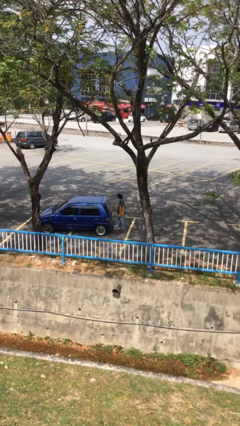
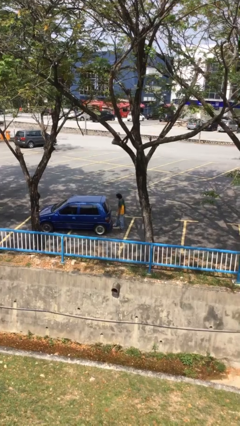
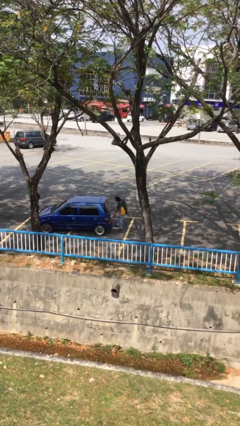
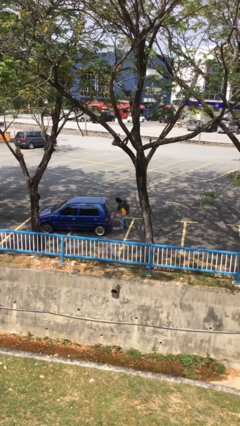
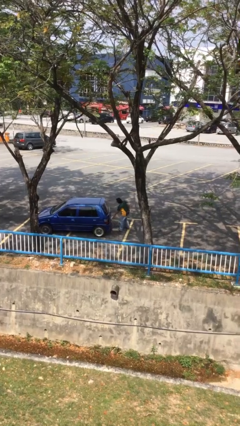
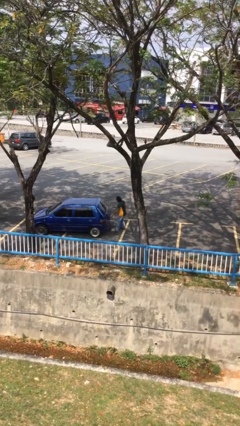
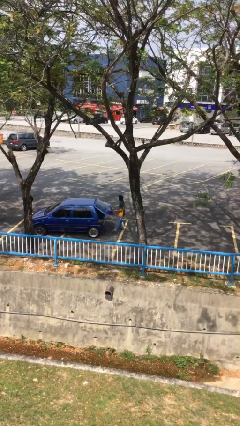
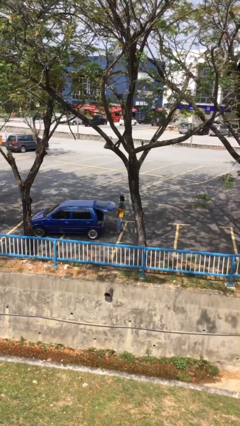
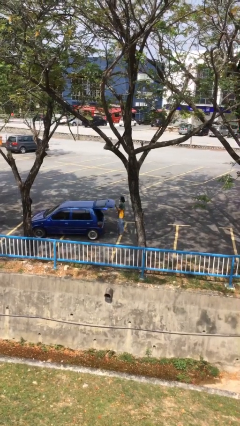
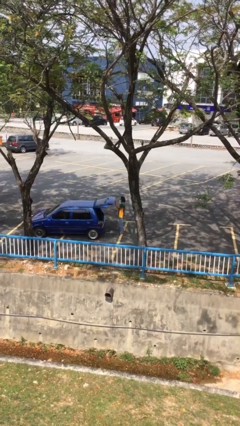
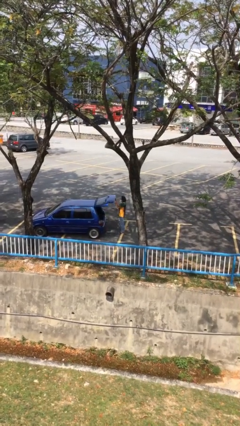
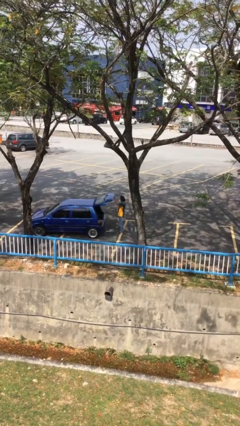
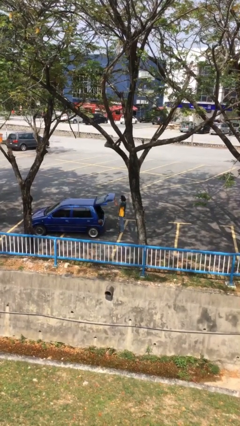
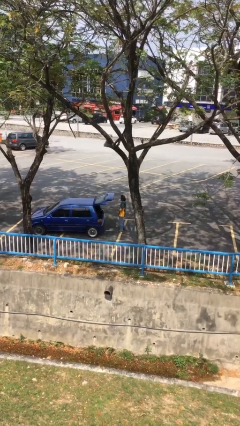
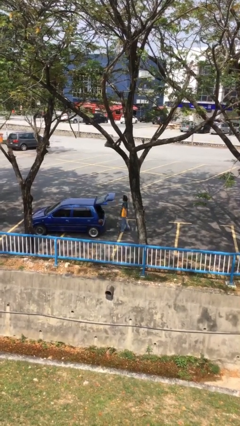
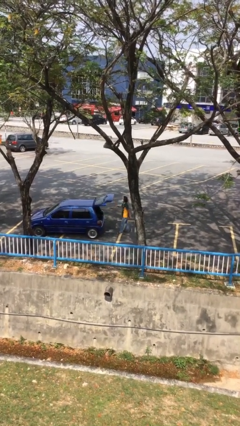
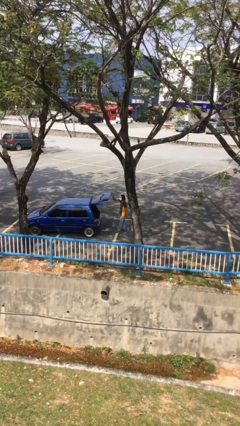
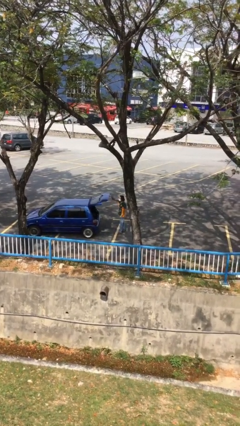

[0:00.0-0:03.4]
person opens car trunk

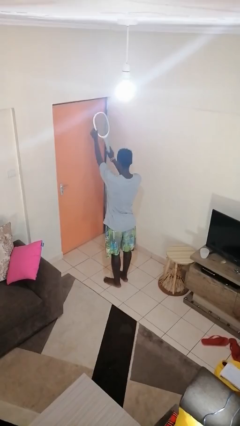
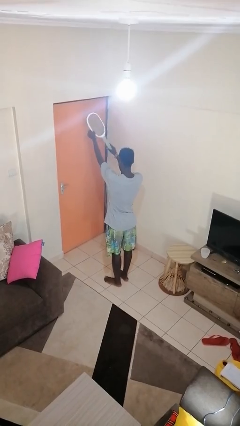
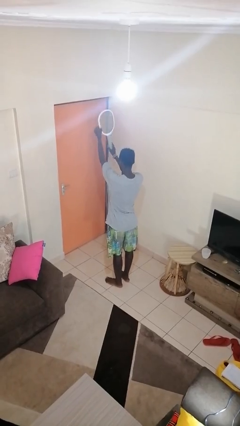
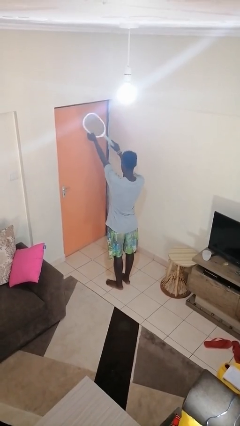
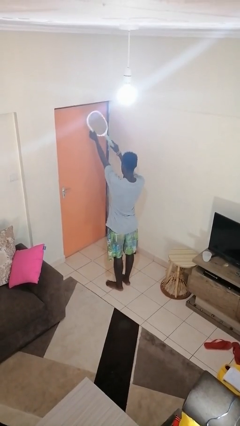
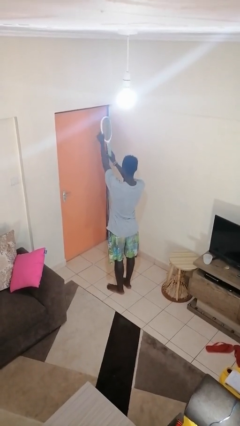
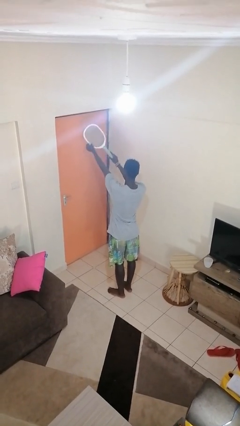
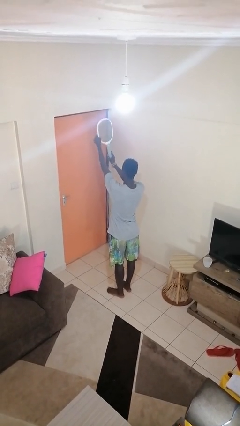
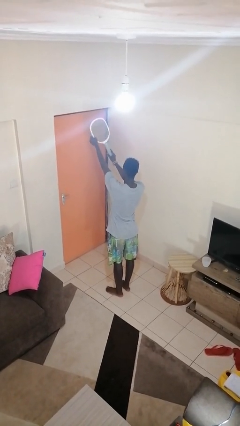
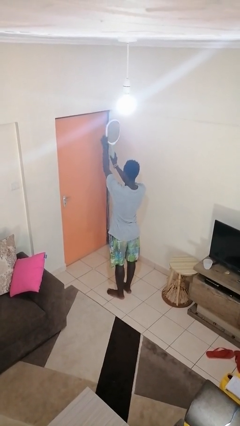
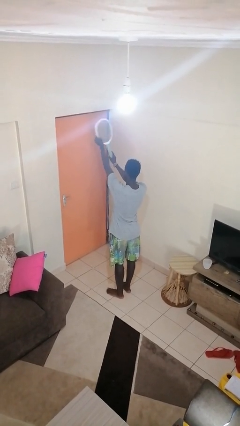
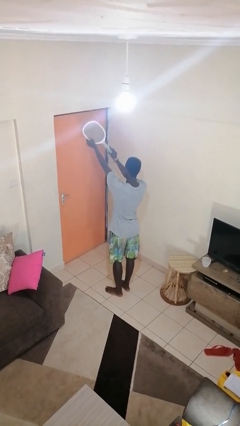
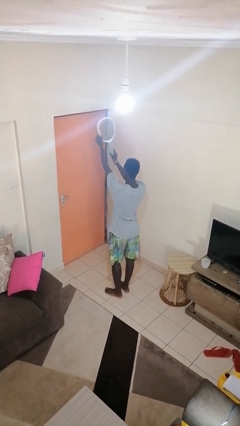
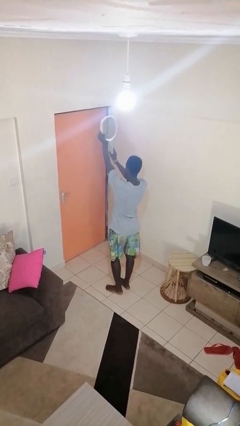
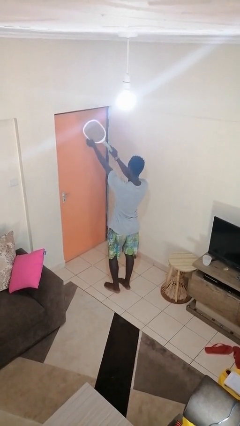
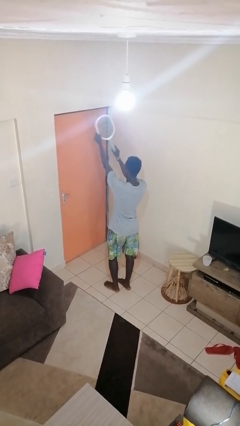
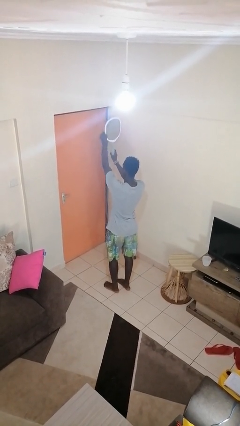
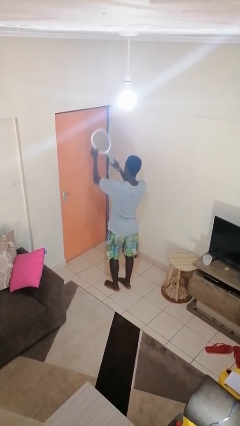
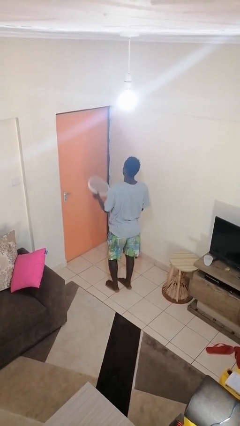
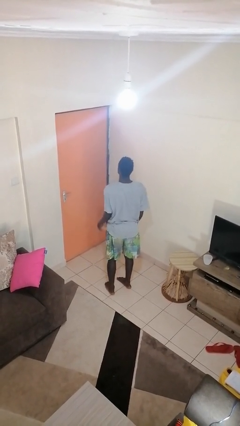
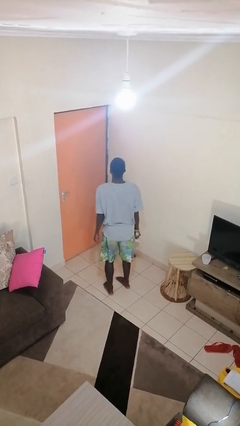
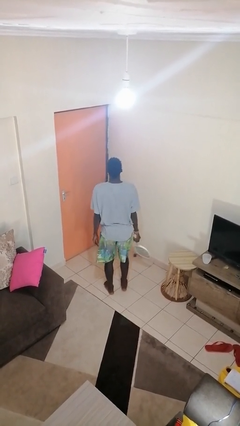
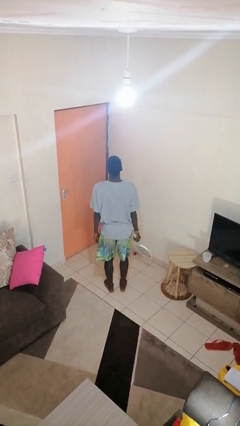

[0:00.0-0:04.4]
person holds object above head

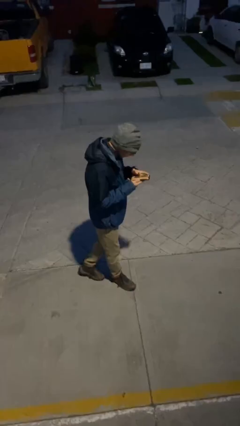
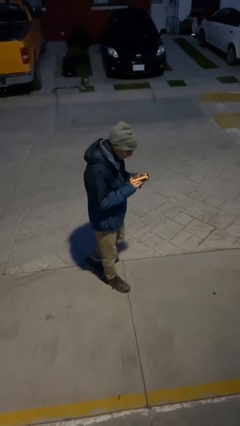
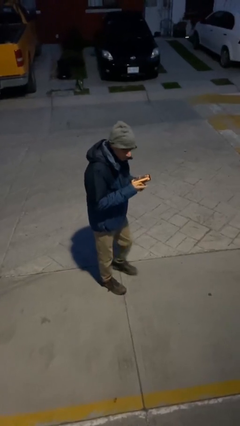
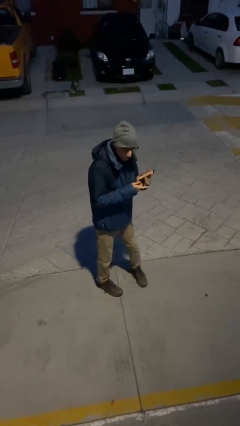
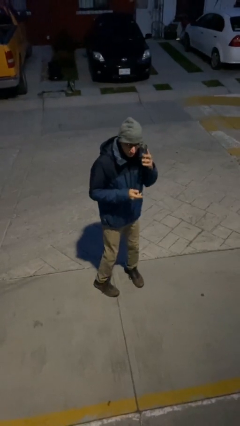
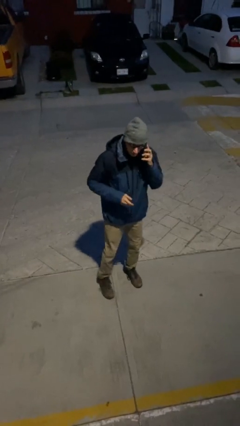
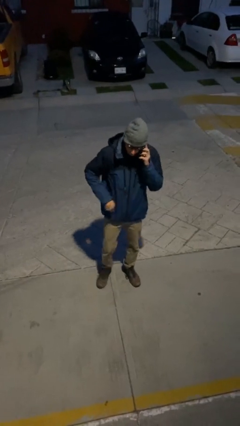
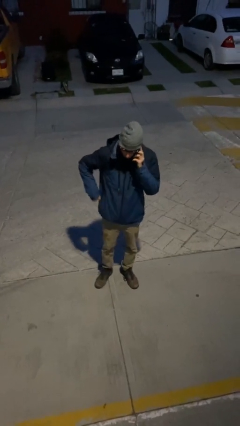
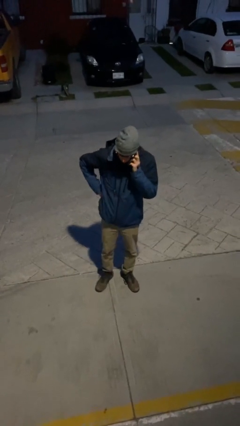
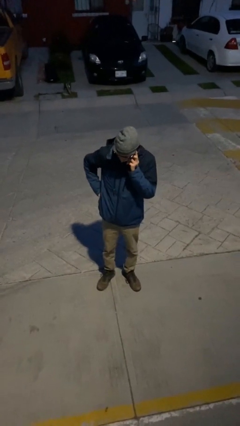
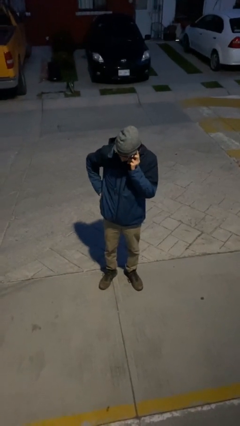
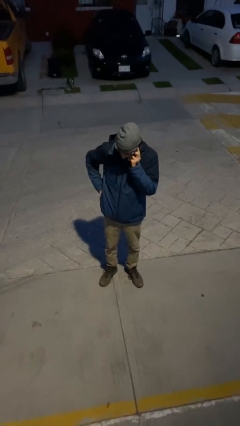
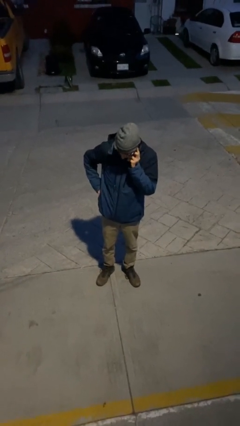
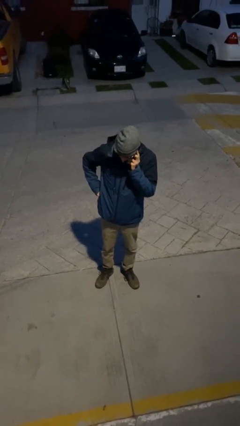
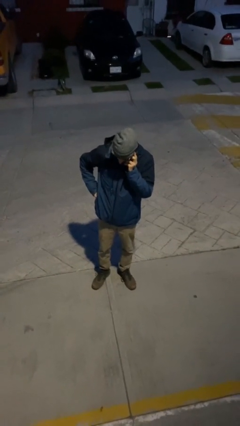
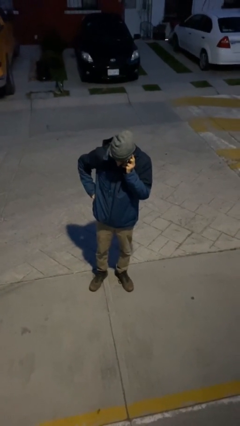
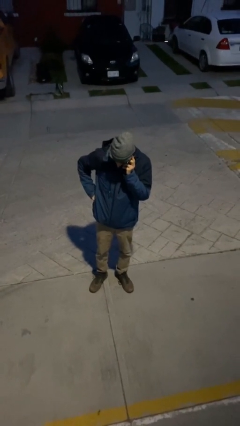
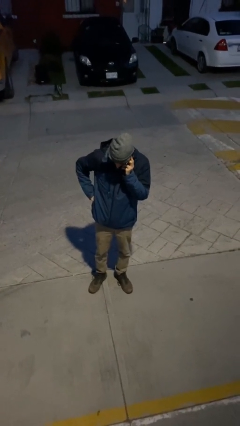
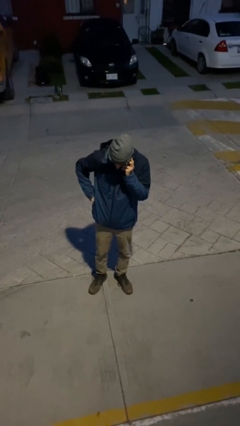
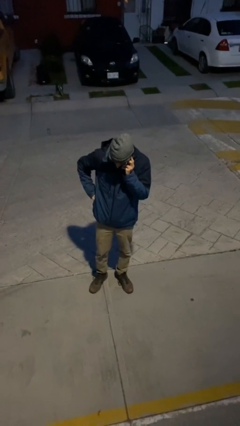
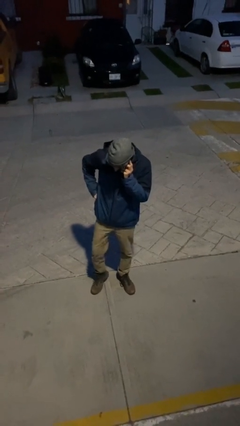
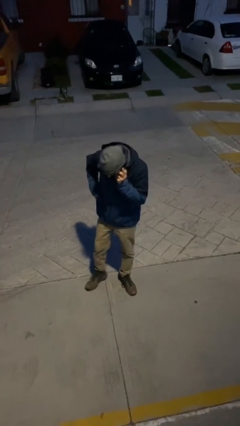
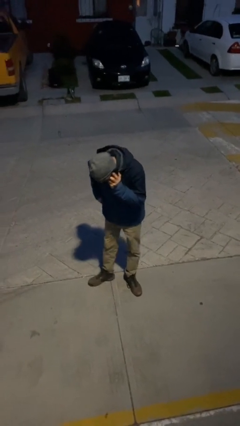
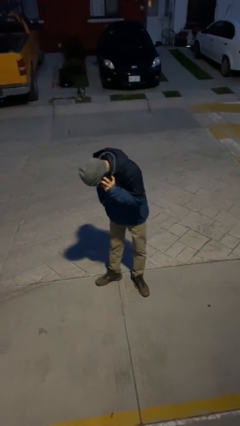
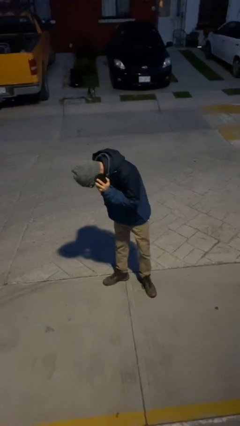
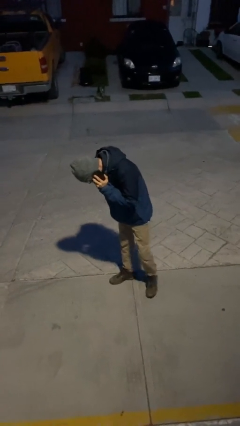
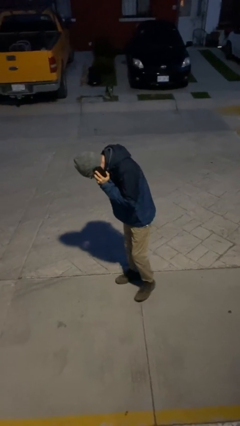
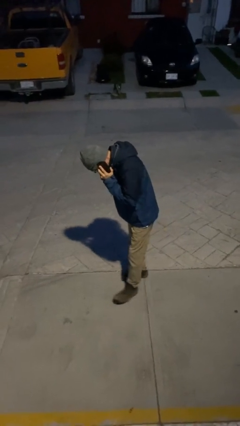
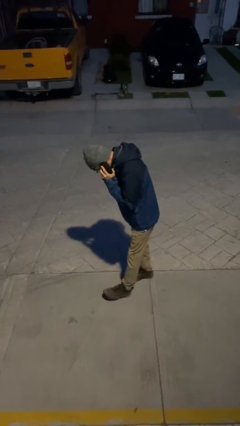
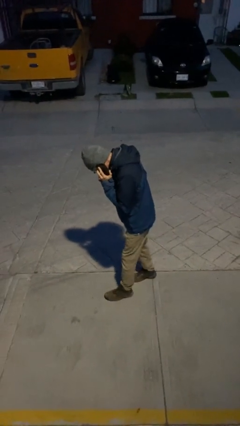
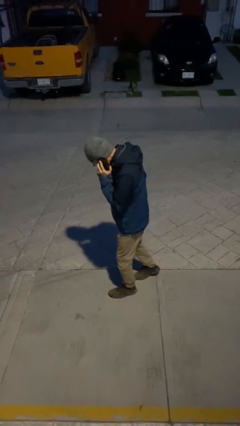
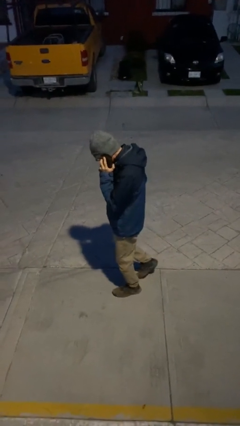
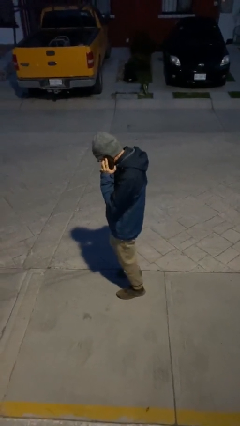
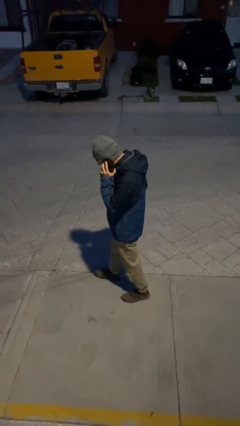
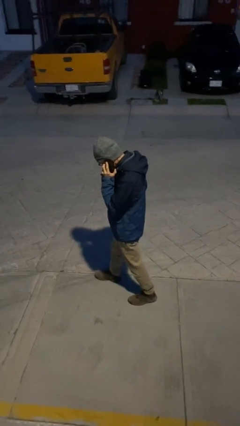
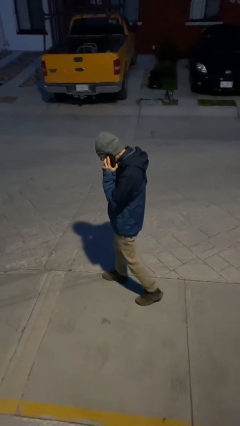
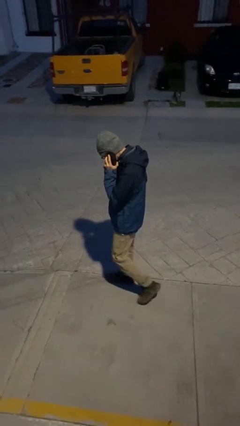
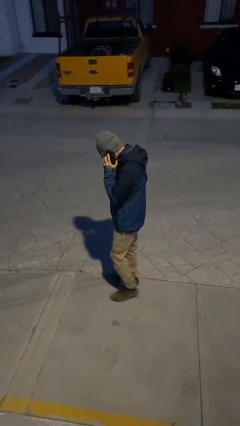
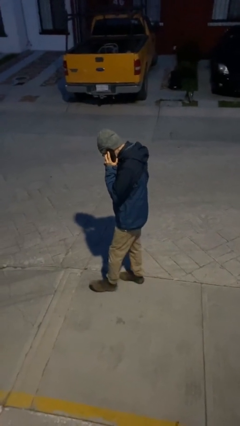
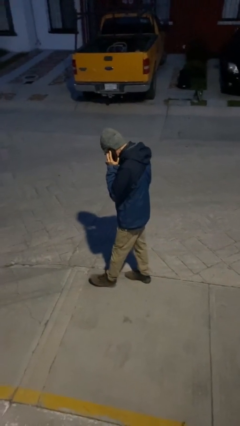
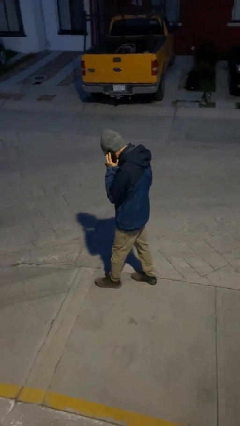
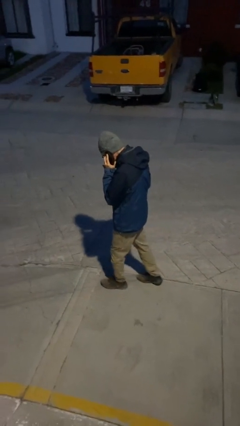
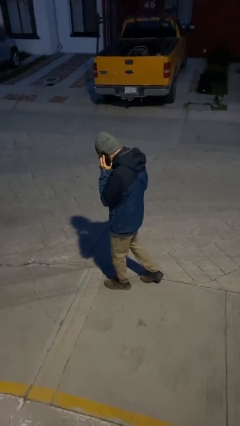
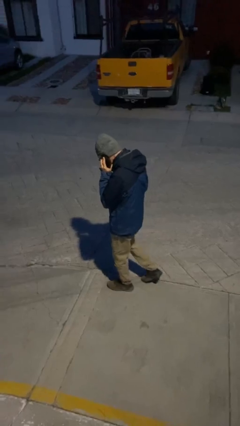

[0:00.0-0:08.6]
person talks on phone

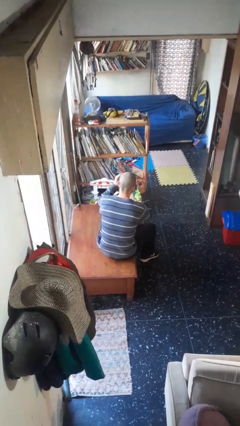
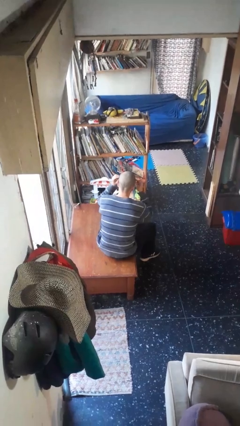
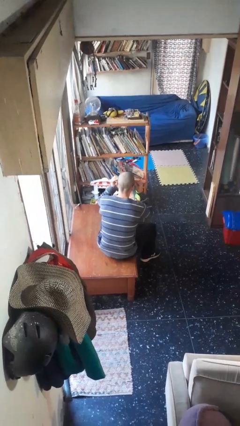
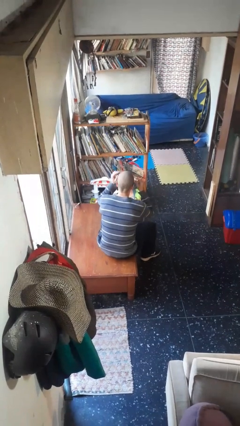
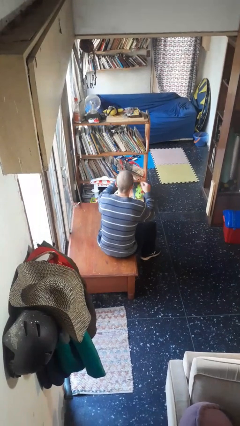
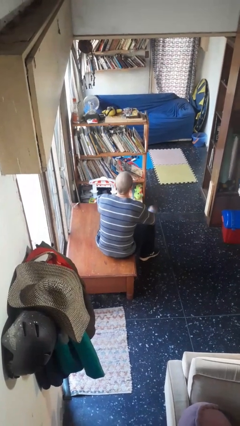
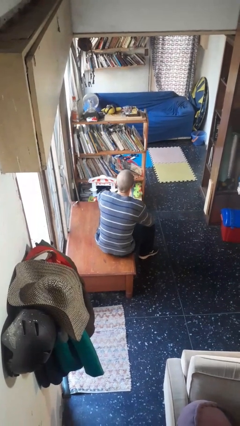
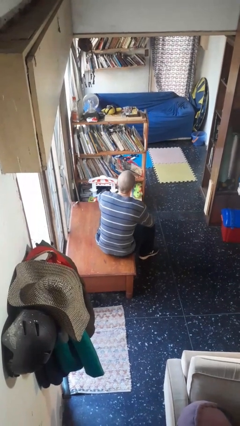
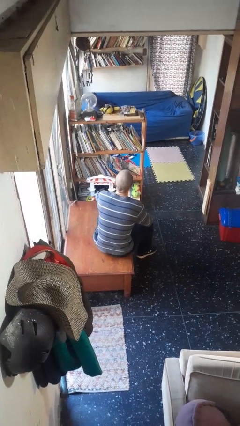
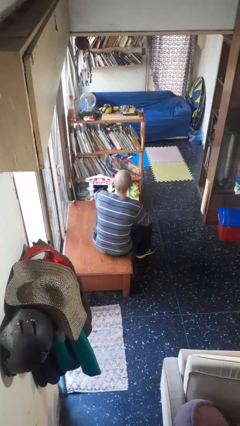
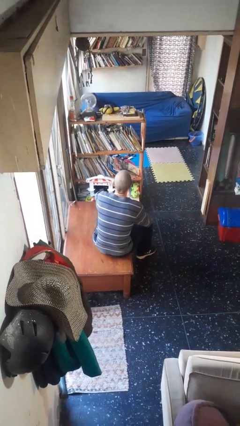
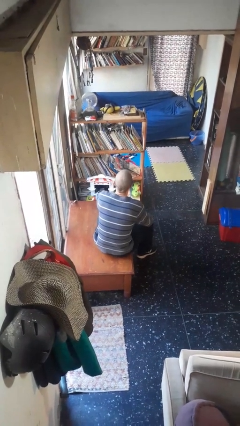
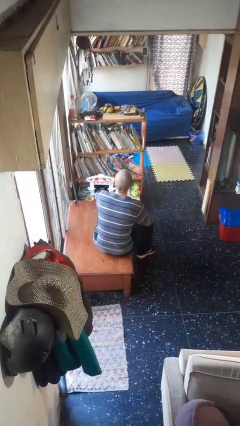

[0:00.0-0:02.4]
person puts on glasses
